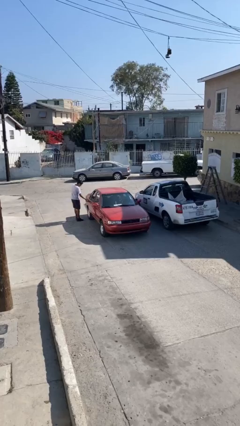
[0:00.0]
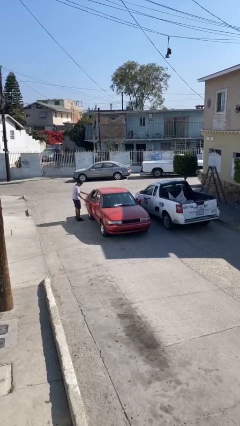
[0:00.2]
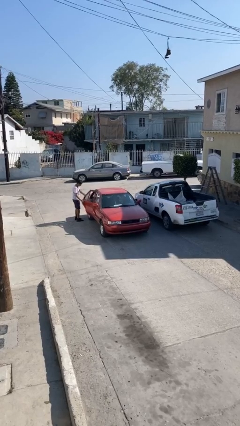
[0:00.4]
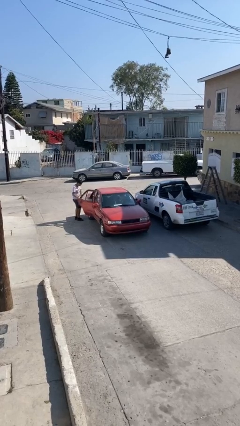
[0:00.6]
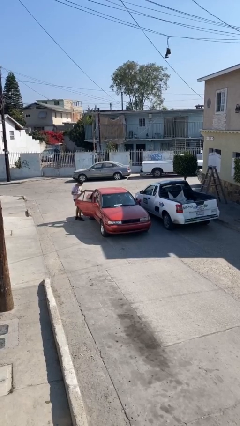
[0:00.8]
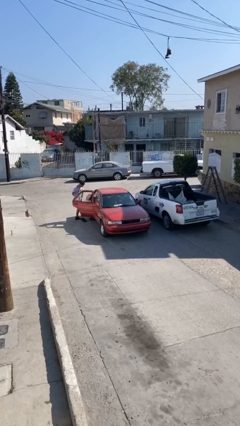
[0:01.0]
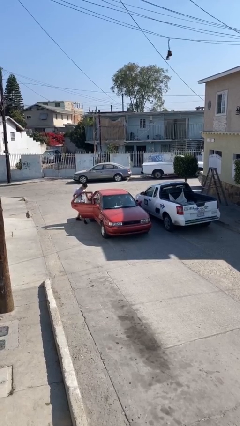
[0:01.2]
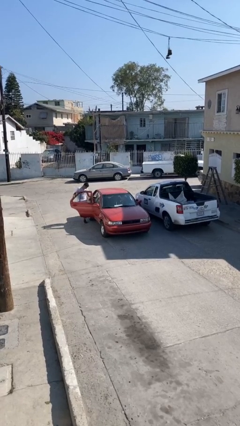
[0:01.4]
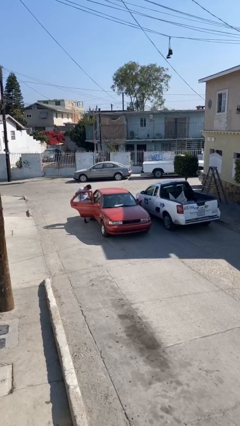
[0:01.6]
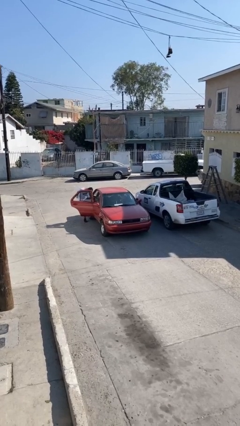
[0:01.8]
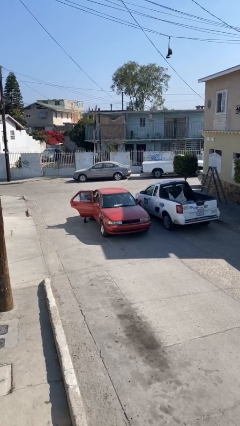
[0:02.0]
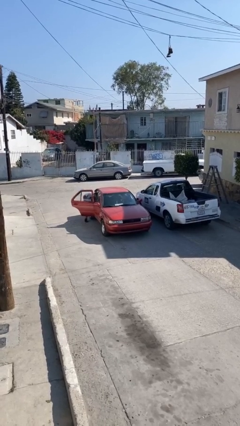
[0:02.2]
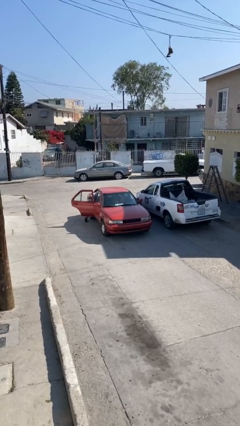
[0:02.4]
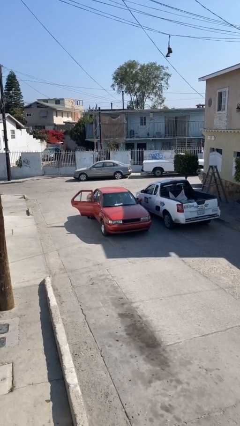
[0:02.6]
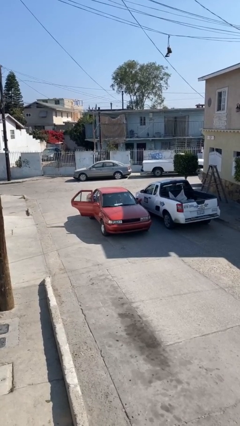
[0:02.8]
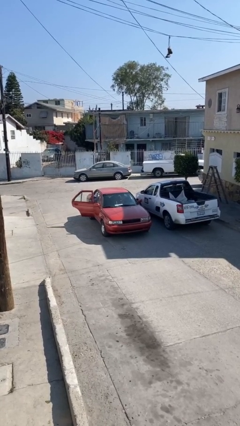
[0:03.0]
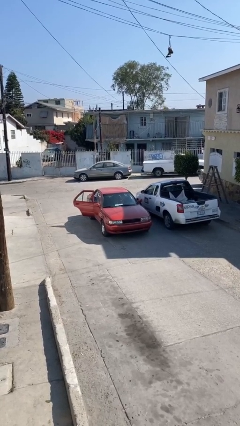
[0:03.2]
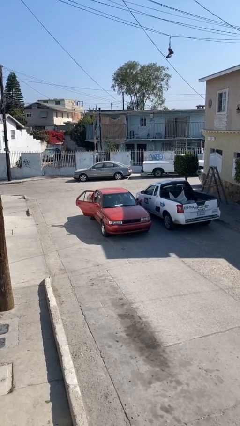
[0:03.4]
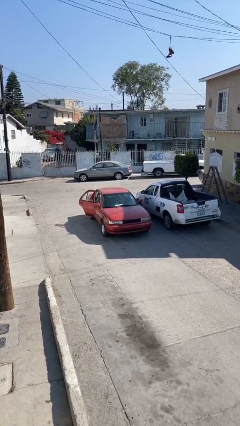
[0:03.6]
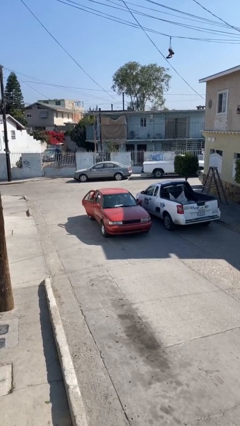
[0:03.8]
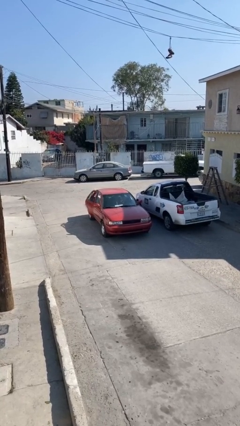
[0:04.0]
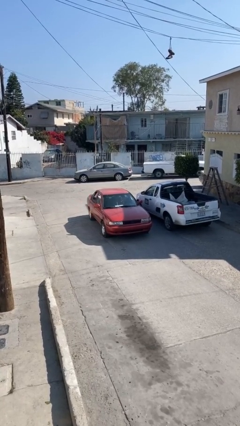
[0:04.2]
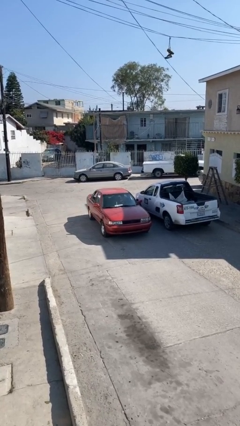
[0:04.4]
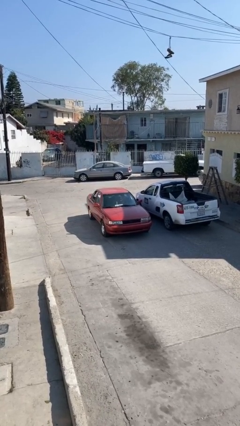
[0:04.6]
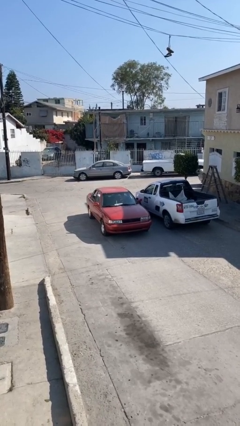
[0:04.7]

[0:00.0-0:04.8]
car picks up person

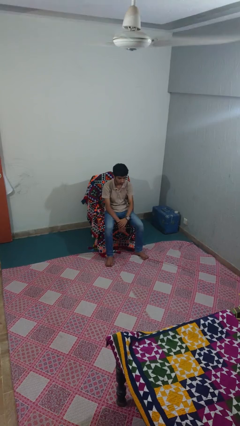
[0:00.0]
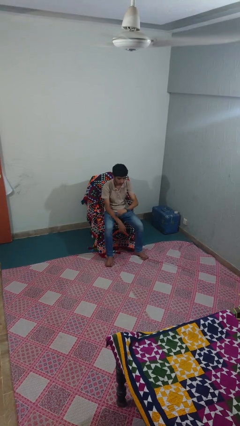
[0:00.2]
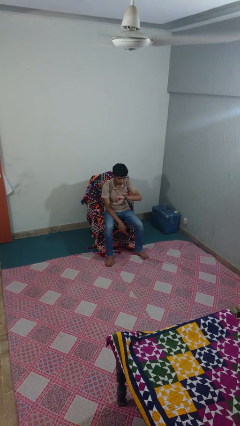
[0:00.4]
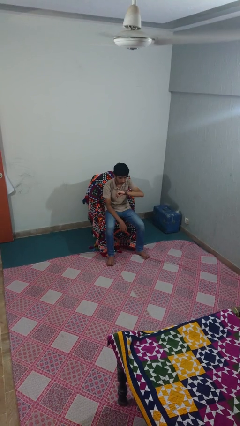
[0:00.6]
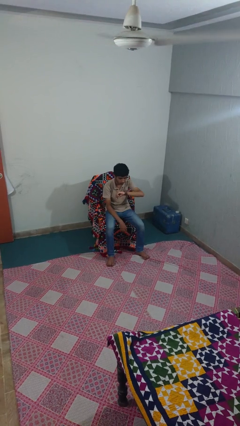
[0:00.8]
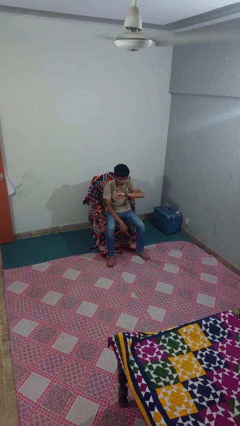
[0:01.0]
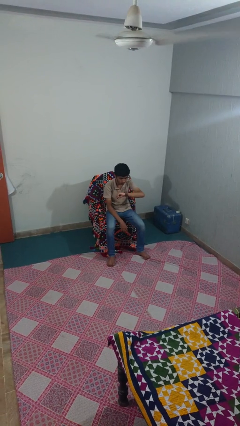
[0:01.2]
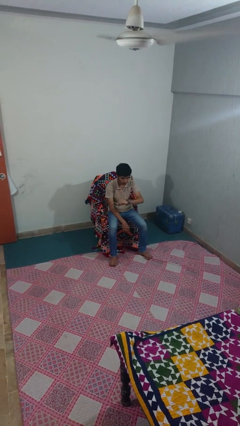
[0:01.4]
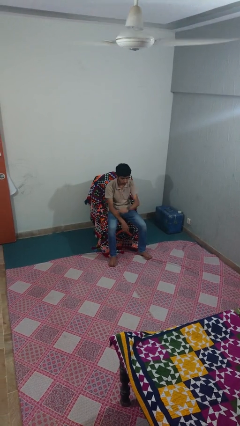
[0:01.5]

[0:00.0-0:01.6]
person looks at wristwatch

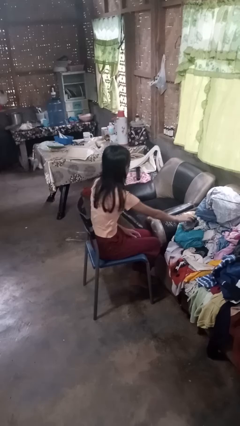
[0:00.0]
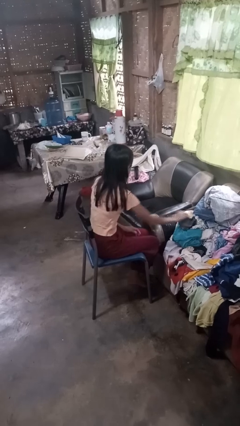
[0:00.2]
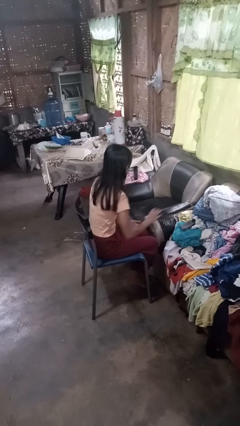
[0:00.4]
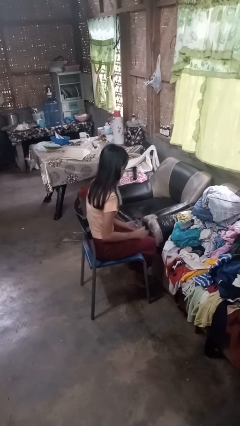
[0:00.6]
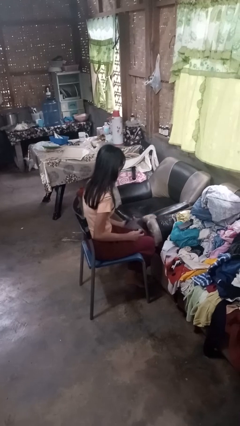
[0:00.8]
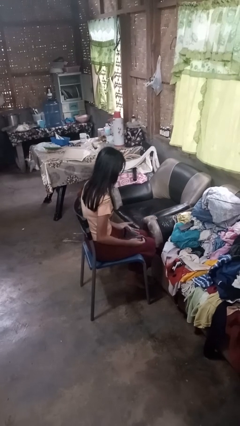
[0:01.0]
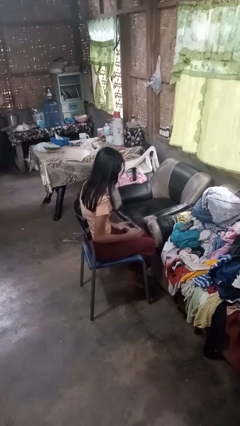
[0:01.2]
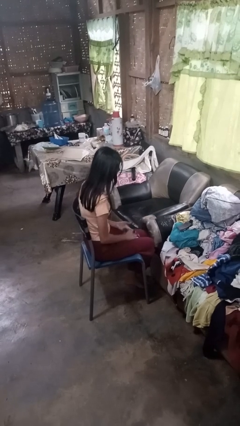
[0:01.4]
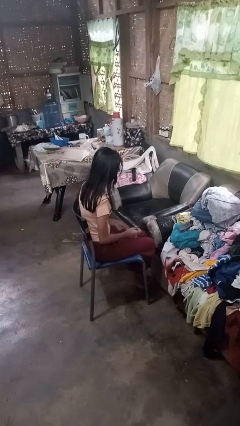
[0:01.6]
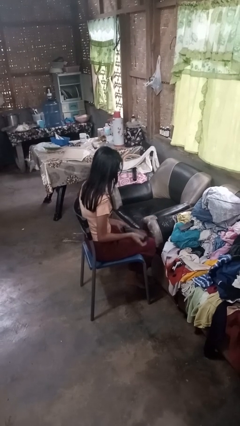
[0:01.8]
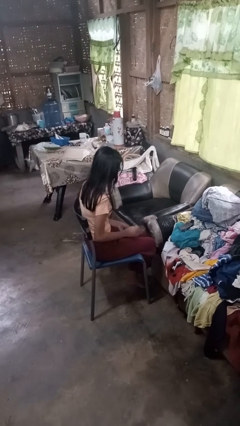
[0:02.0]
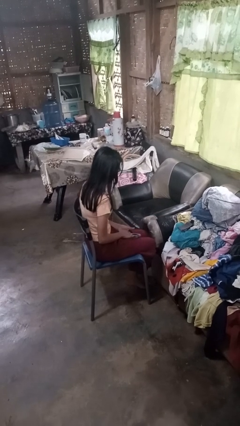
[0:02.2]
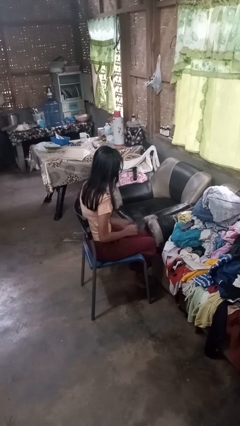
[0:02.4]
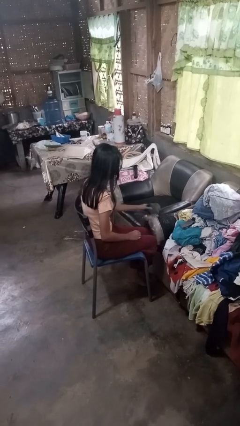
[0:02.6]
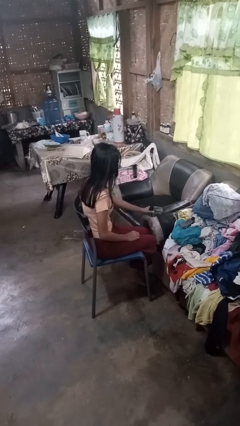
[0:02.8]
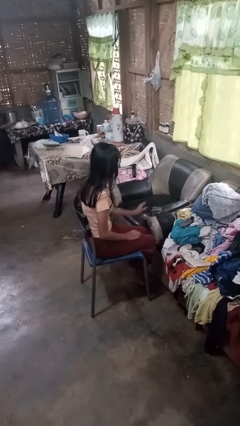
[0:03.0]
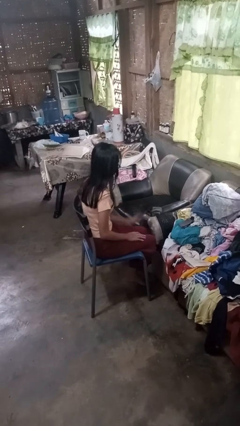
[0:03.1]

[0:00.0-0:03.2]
person folds socks

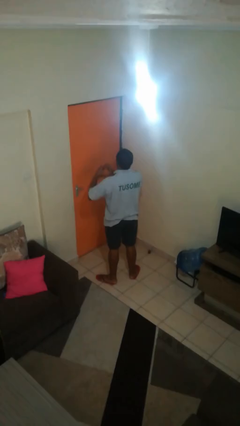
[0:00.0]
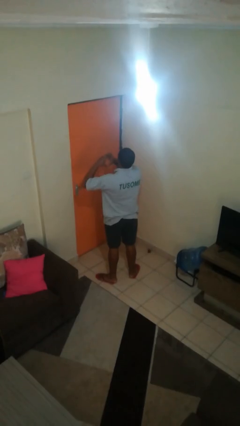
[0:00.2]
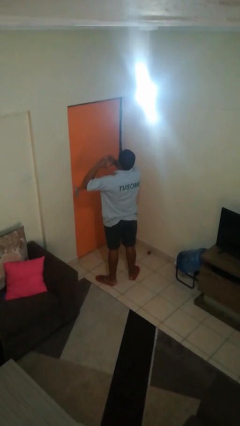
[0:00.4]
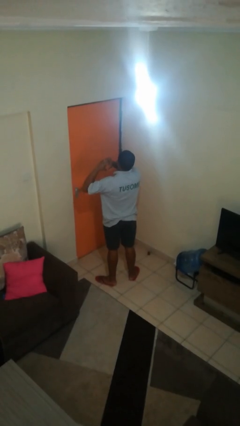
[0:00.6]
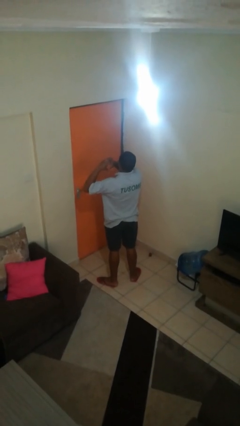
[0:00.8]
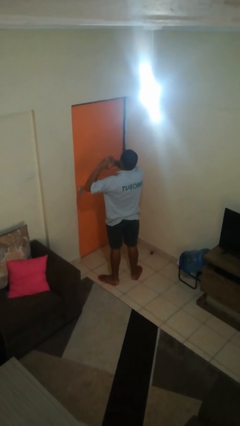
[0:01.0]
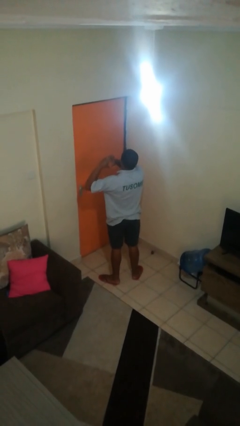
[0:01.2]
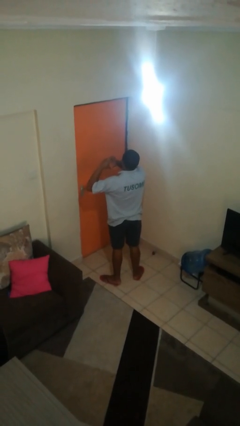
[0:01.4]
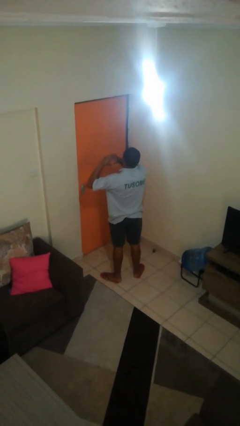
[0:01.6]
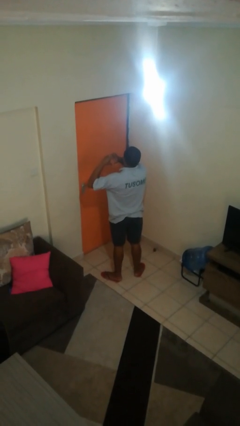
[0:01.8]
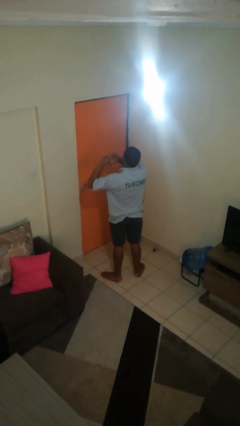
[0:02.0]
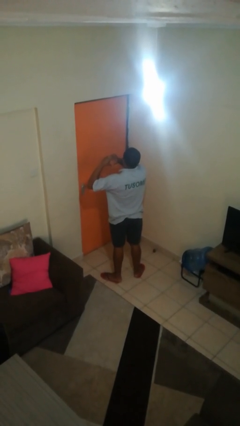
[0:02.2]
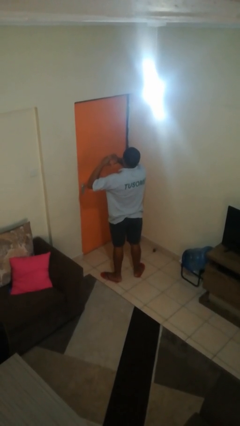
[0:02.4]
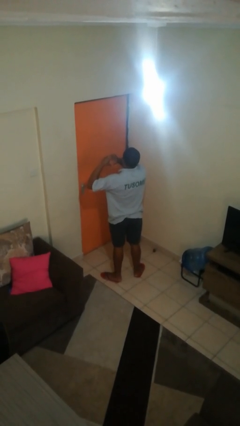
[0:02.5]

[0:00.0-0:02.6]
person gestures heart

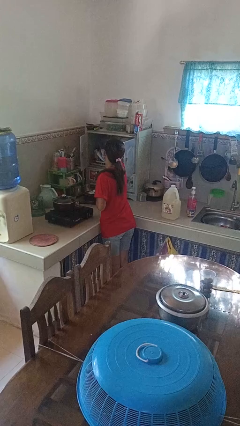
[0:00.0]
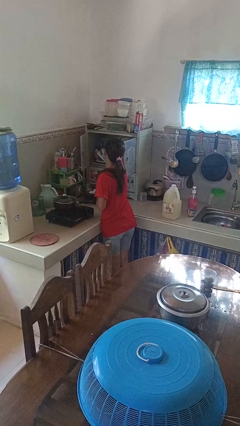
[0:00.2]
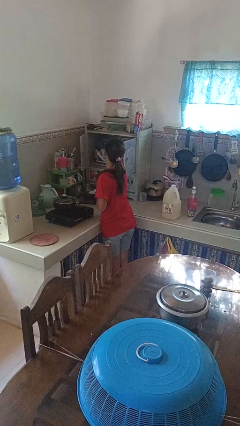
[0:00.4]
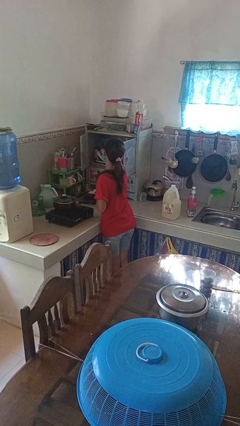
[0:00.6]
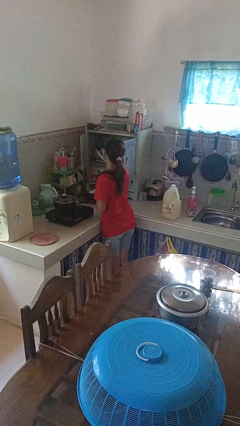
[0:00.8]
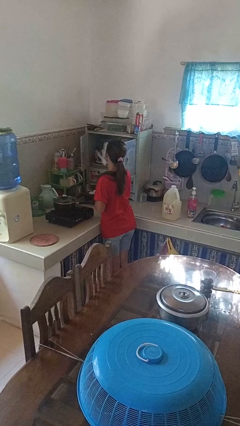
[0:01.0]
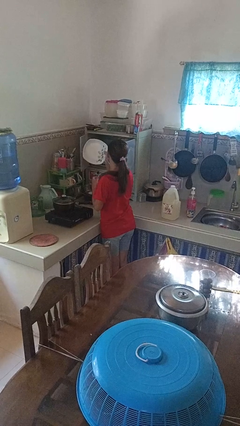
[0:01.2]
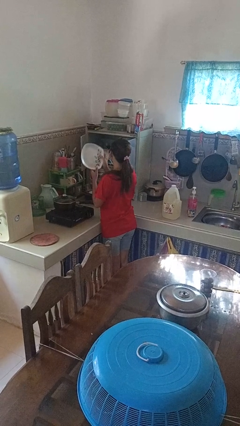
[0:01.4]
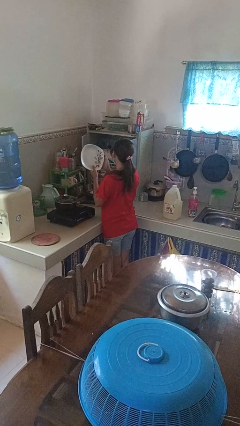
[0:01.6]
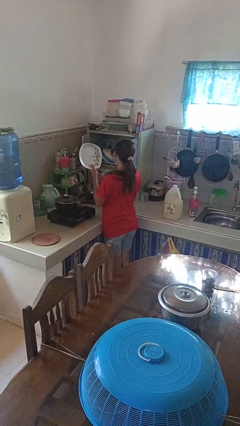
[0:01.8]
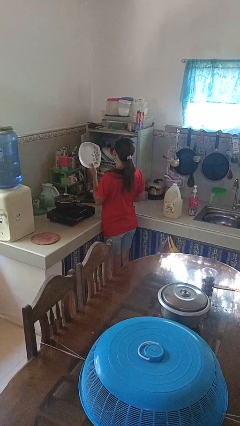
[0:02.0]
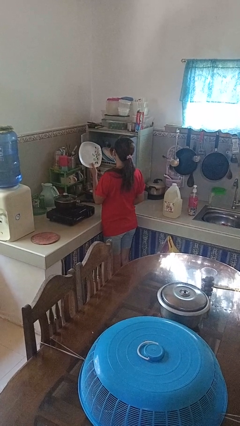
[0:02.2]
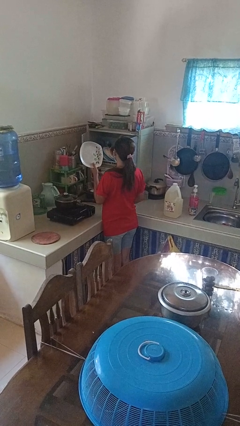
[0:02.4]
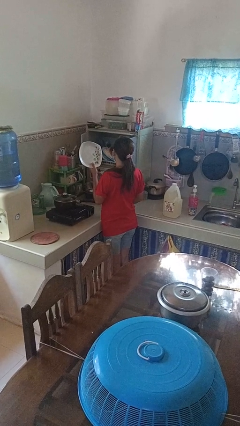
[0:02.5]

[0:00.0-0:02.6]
person takes object from cabinet

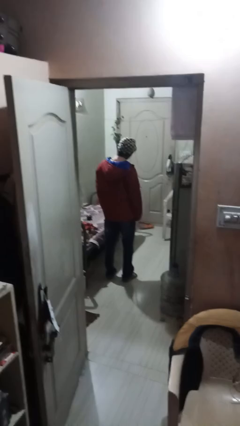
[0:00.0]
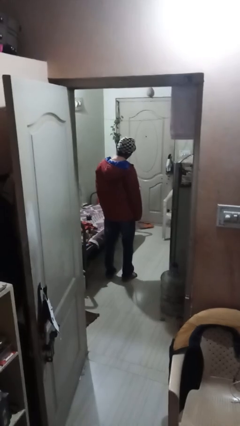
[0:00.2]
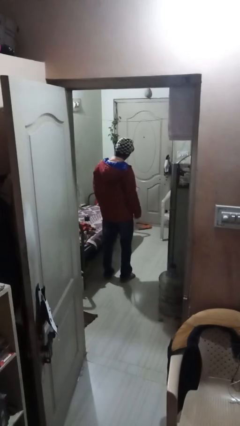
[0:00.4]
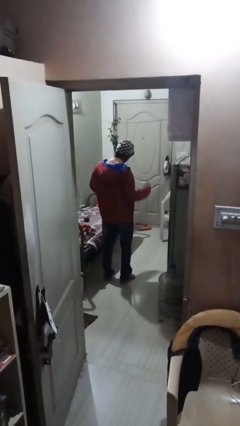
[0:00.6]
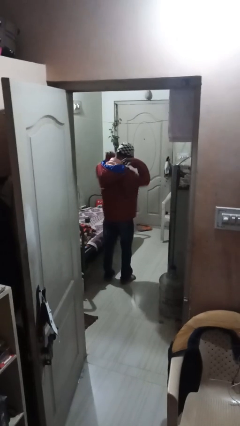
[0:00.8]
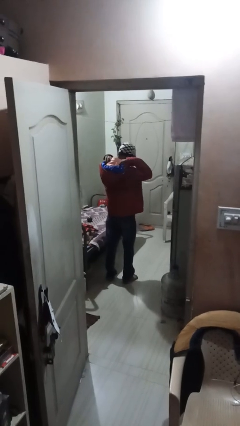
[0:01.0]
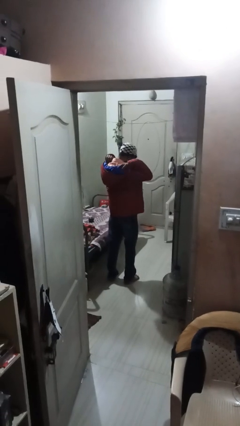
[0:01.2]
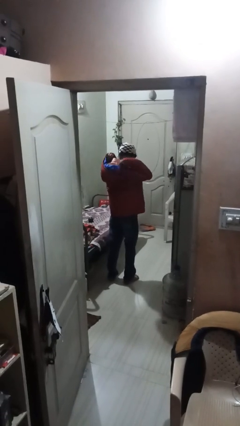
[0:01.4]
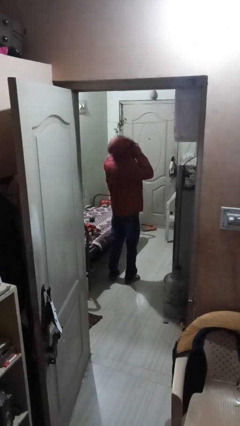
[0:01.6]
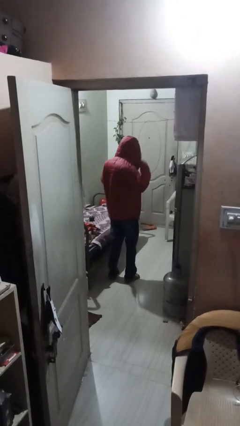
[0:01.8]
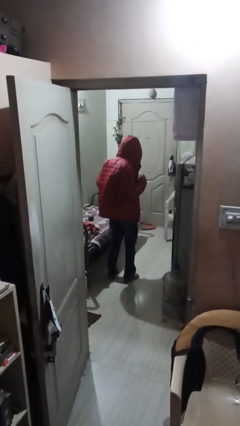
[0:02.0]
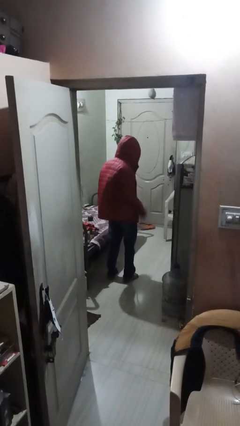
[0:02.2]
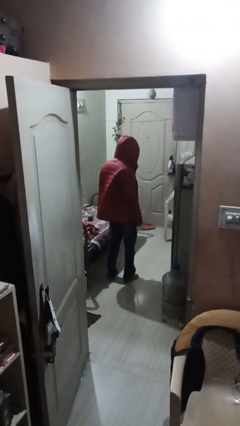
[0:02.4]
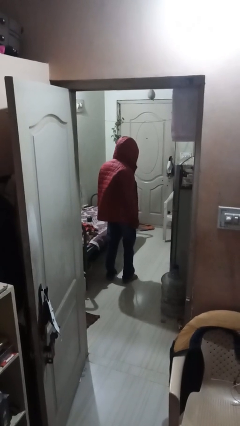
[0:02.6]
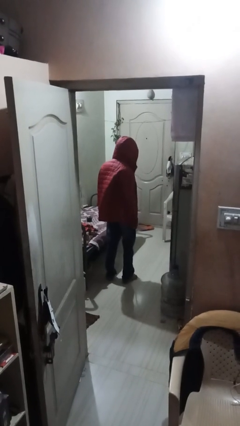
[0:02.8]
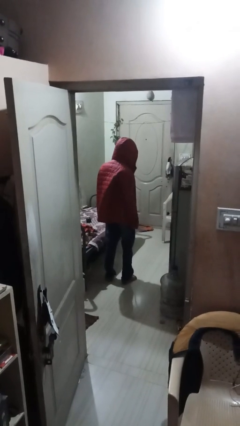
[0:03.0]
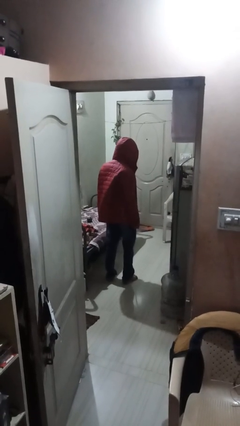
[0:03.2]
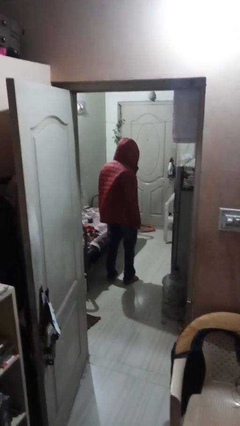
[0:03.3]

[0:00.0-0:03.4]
person puts on hoodie
